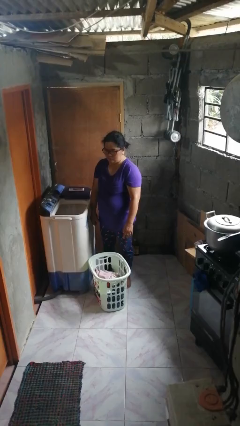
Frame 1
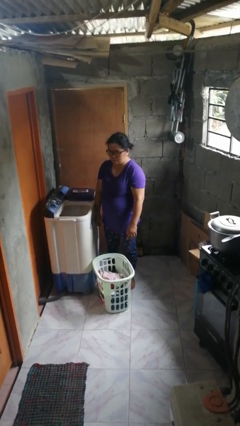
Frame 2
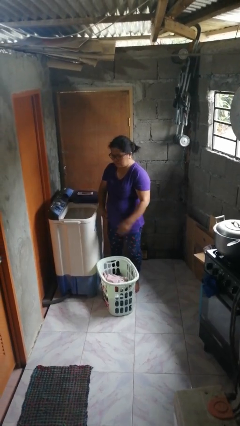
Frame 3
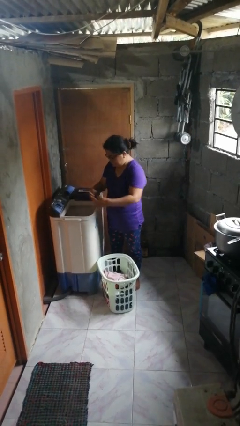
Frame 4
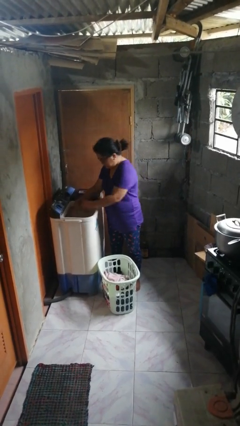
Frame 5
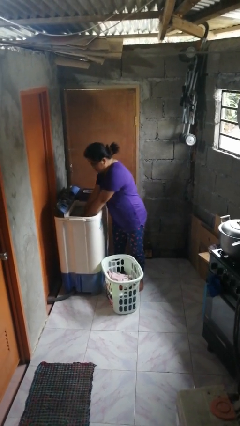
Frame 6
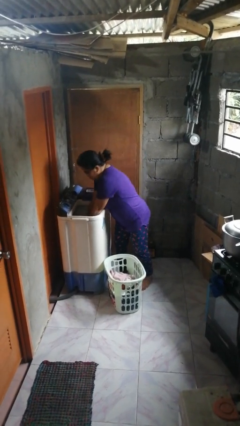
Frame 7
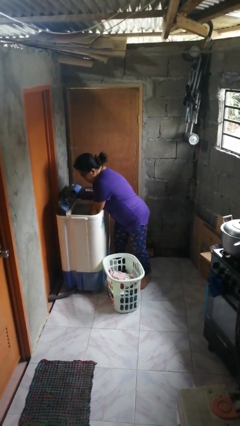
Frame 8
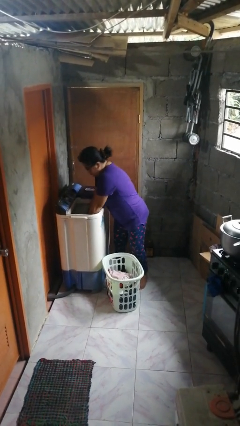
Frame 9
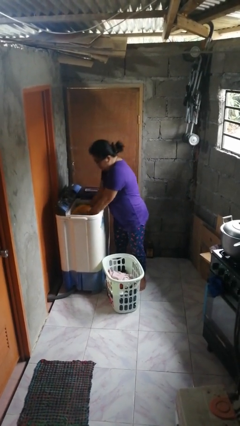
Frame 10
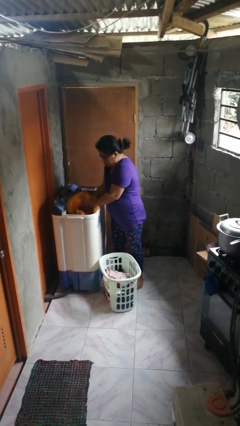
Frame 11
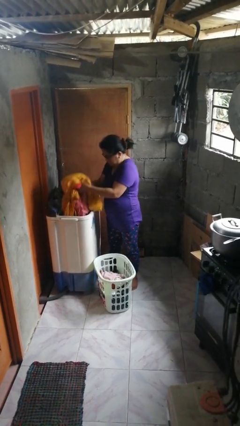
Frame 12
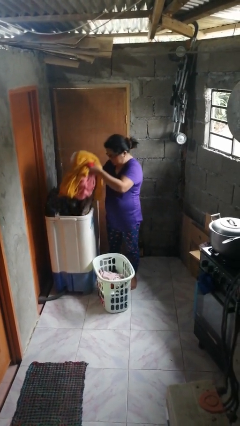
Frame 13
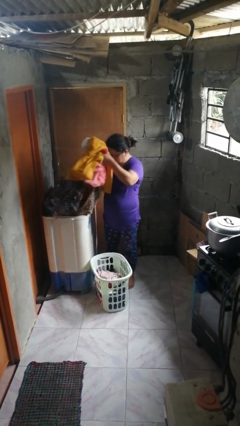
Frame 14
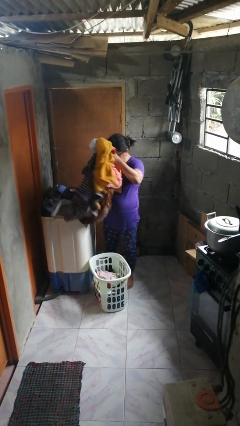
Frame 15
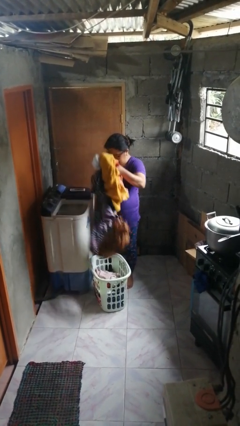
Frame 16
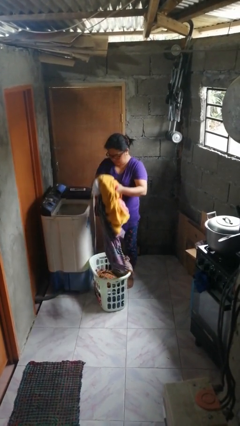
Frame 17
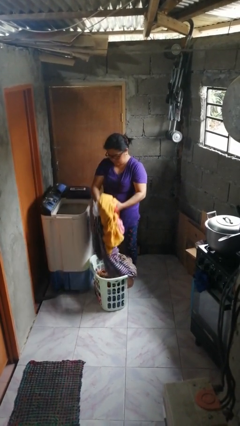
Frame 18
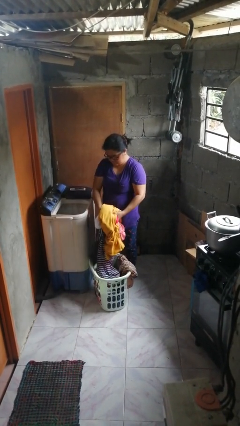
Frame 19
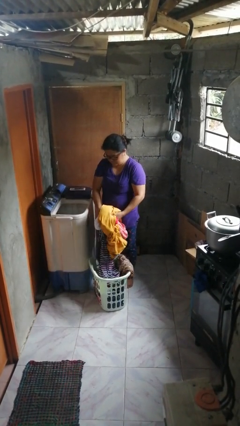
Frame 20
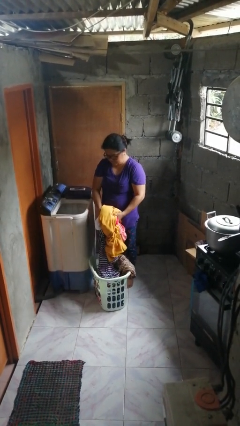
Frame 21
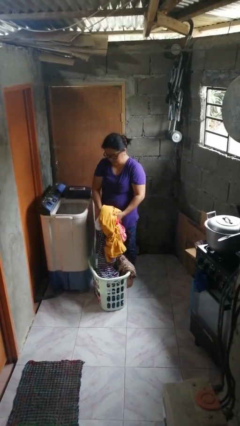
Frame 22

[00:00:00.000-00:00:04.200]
person unloads clotheswasher

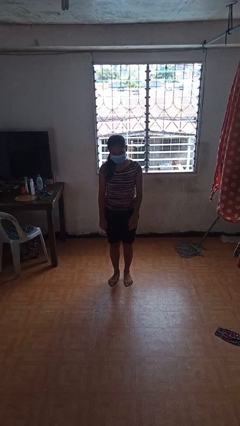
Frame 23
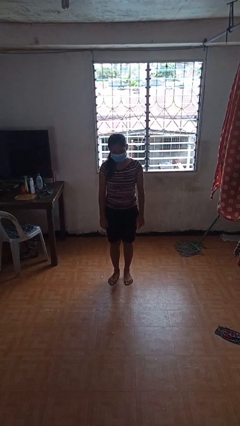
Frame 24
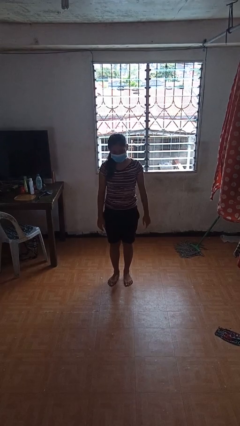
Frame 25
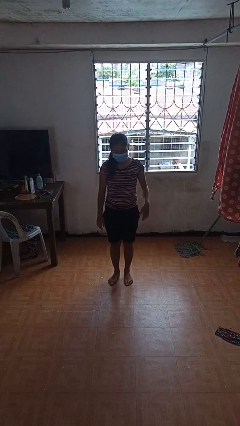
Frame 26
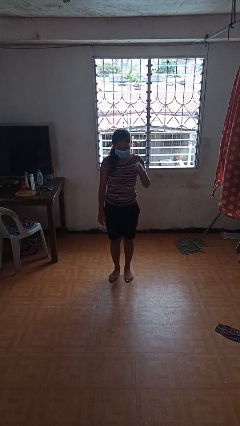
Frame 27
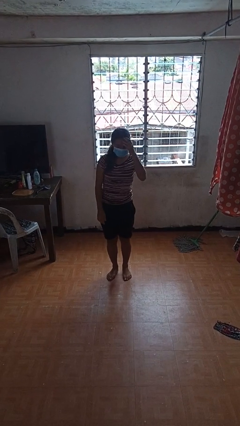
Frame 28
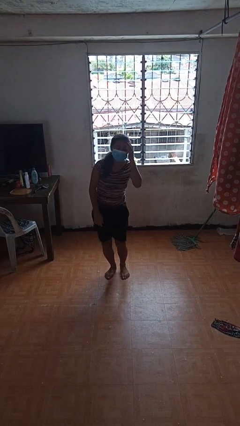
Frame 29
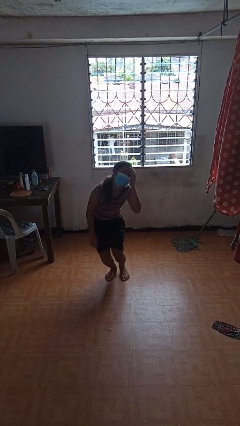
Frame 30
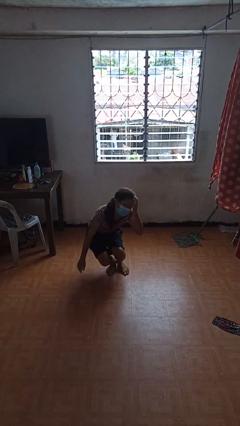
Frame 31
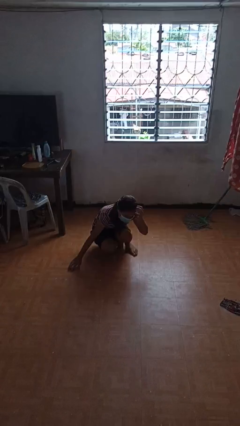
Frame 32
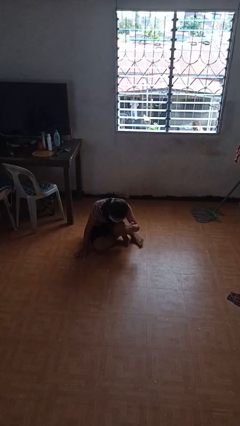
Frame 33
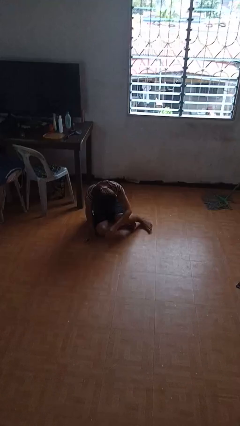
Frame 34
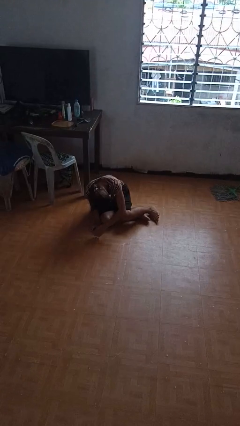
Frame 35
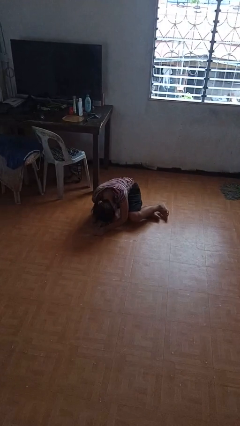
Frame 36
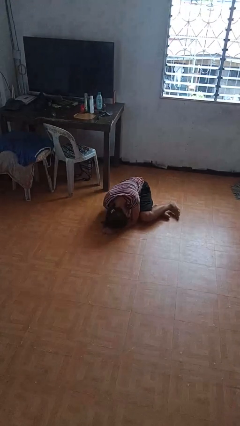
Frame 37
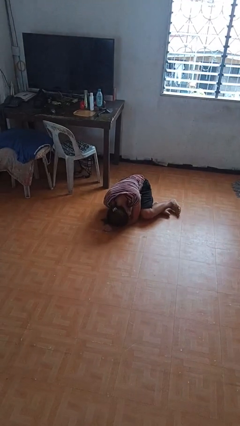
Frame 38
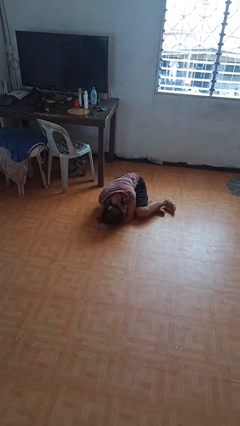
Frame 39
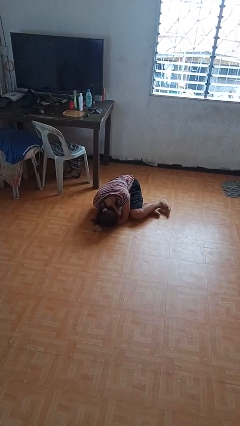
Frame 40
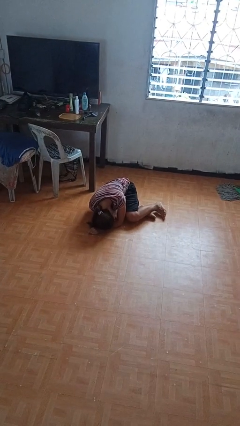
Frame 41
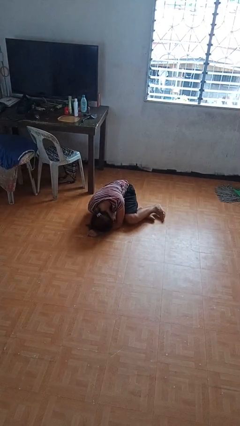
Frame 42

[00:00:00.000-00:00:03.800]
person falls while standing

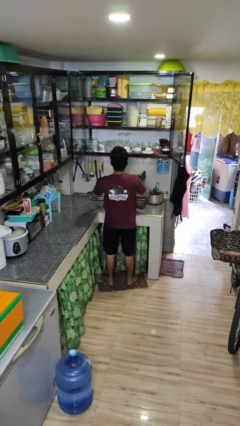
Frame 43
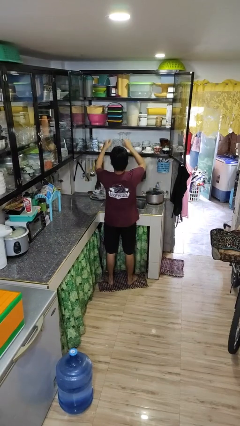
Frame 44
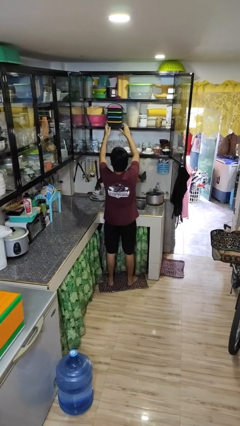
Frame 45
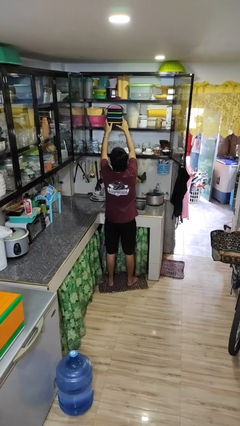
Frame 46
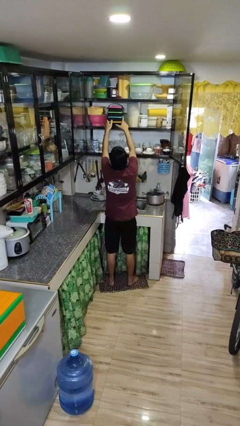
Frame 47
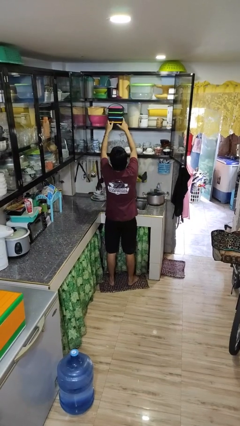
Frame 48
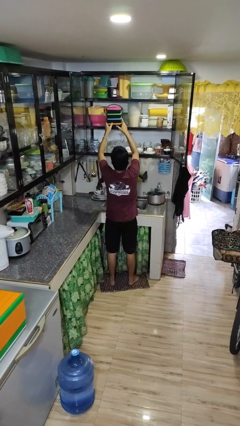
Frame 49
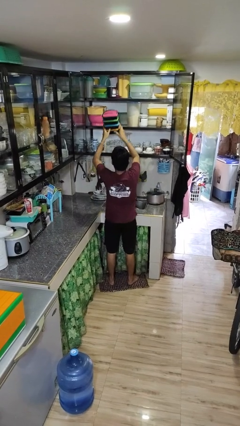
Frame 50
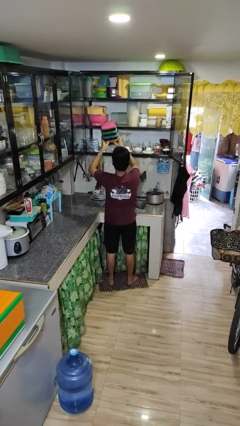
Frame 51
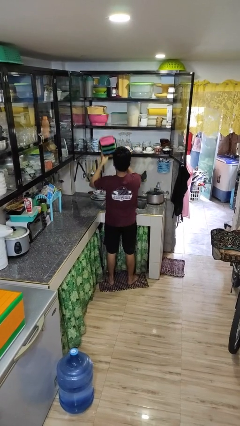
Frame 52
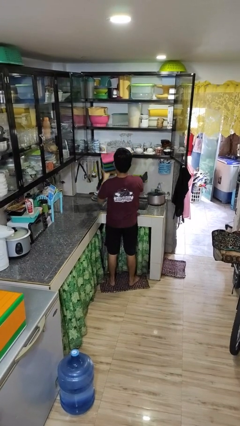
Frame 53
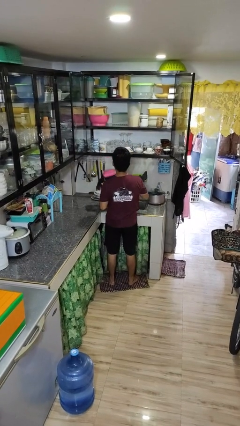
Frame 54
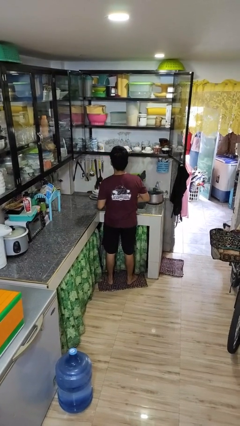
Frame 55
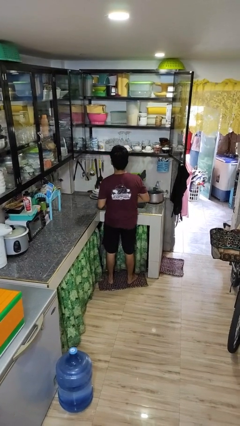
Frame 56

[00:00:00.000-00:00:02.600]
person picks up object from cabinet

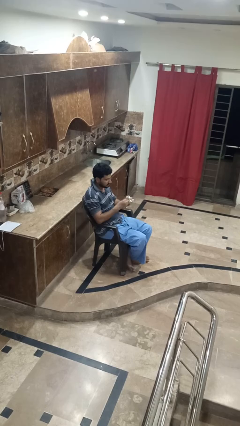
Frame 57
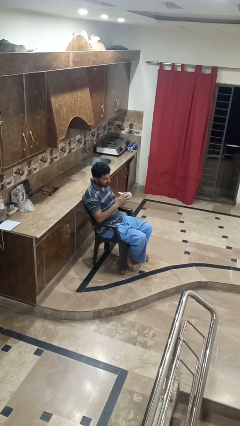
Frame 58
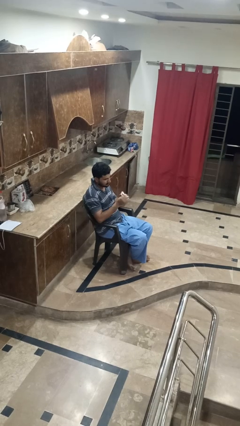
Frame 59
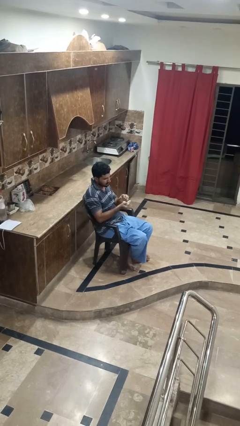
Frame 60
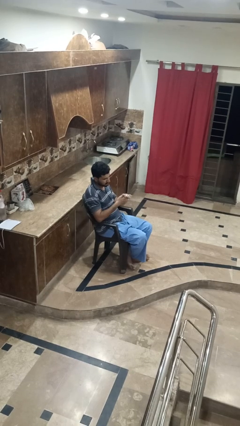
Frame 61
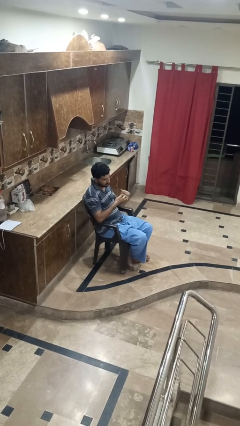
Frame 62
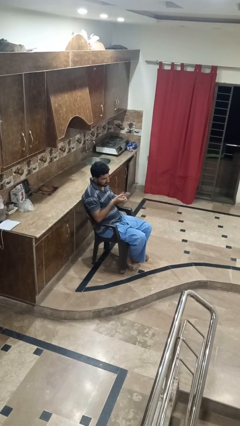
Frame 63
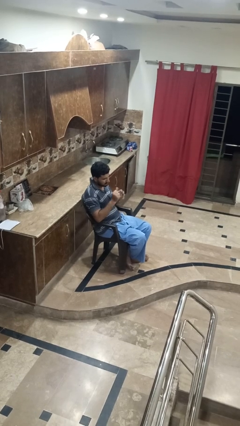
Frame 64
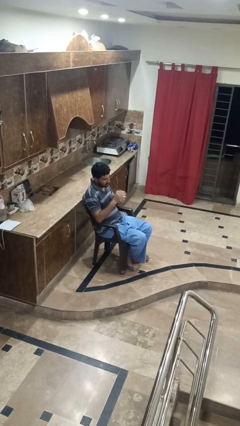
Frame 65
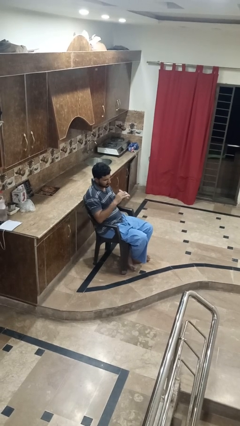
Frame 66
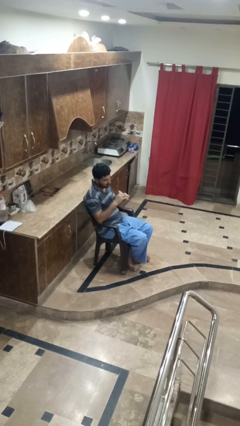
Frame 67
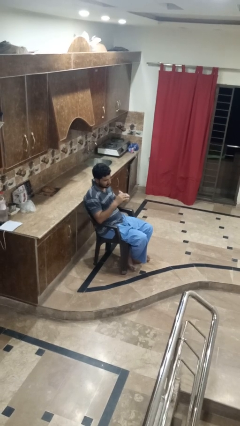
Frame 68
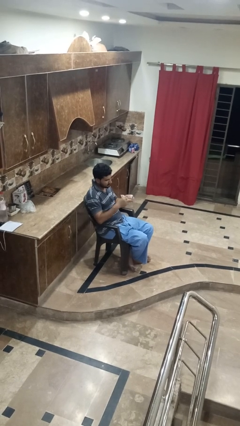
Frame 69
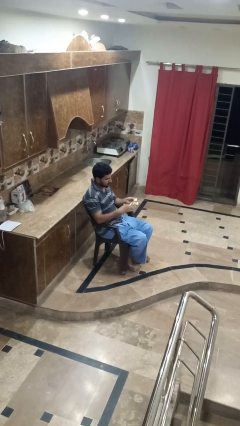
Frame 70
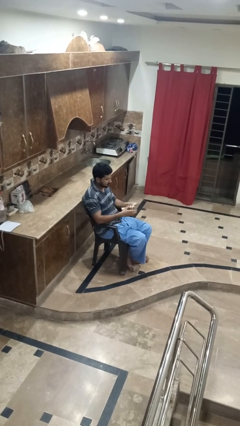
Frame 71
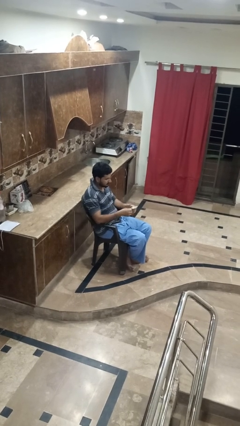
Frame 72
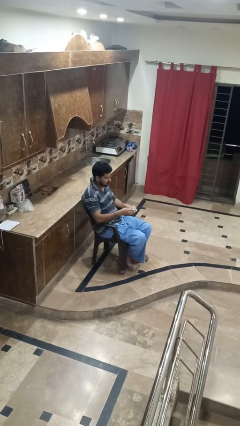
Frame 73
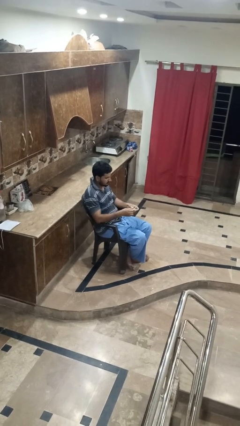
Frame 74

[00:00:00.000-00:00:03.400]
person crumples paper

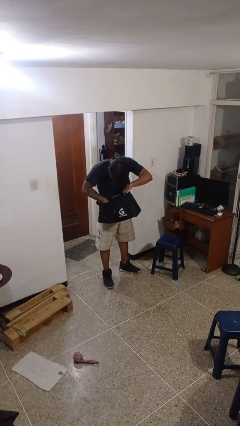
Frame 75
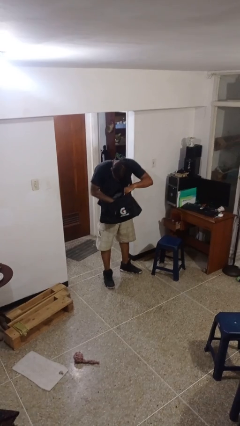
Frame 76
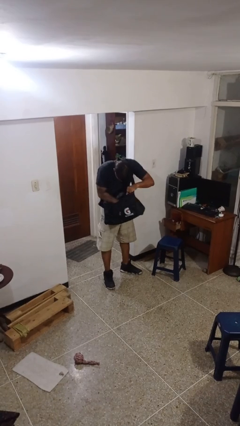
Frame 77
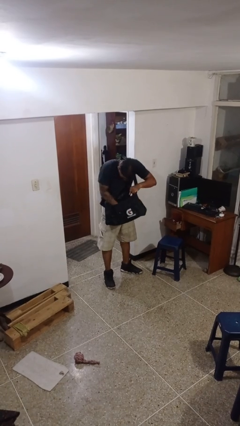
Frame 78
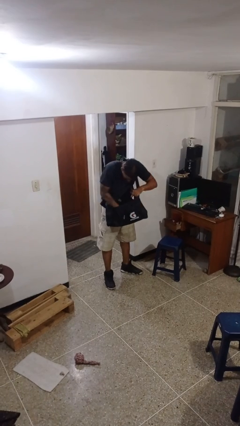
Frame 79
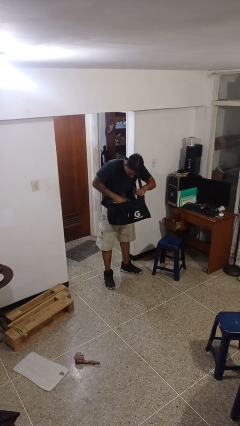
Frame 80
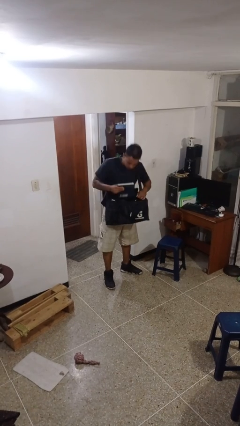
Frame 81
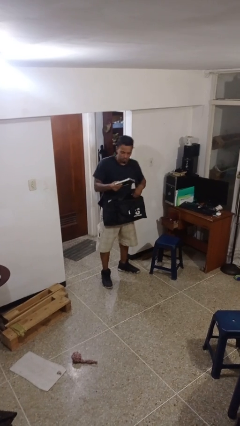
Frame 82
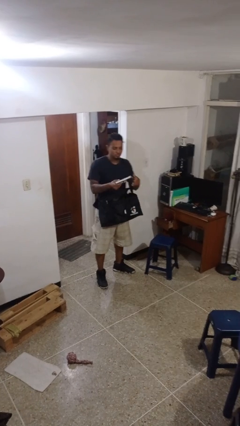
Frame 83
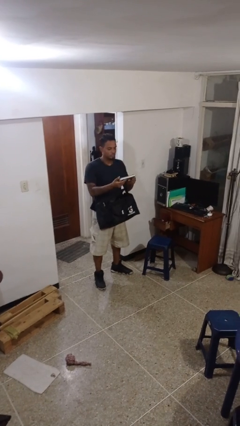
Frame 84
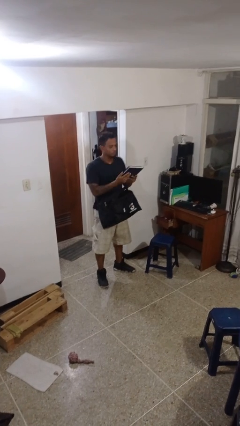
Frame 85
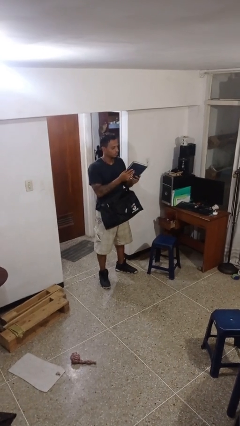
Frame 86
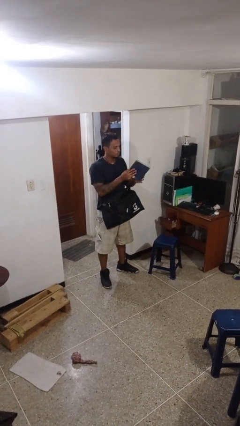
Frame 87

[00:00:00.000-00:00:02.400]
person takes object from purse

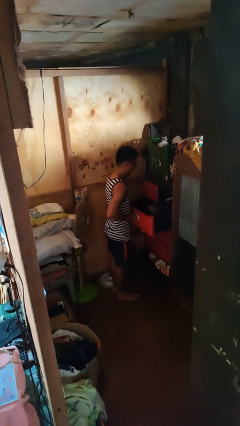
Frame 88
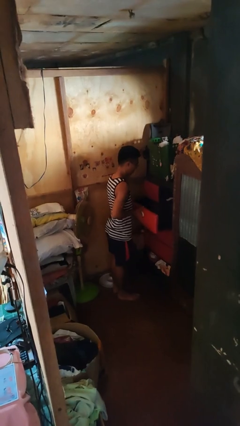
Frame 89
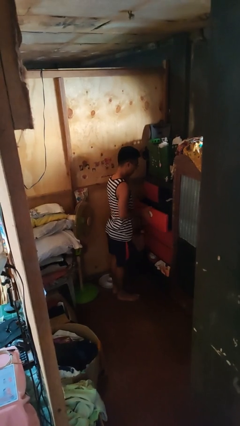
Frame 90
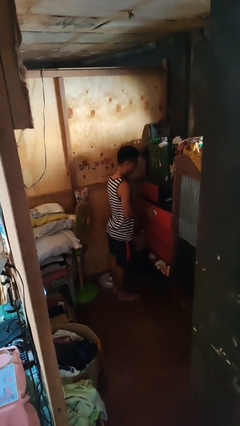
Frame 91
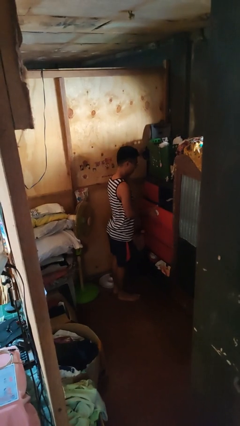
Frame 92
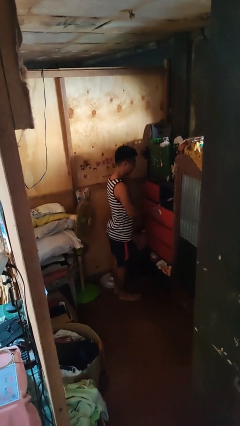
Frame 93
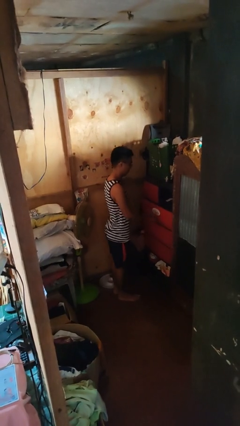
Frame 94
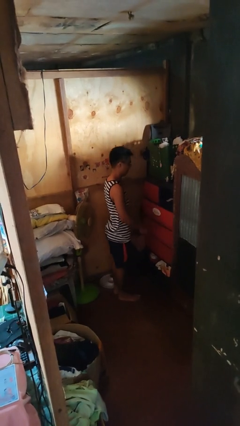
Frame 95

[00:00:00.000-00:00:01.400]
person closes dresser drawer
